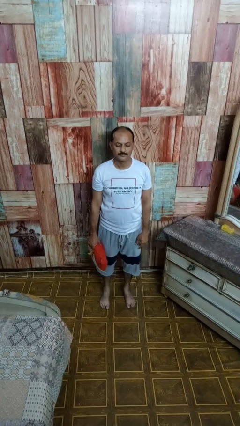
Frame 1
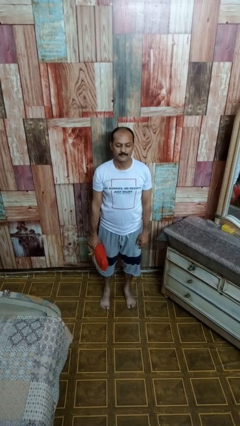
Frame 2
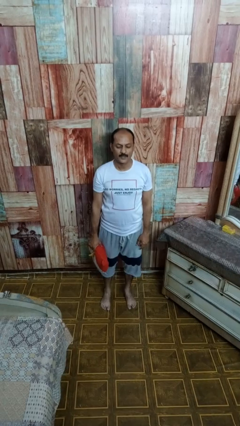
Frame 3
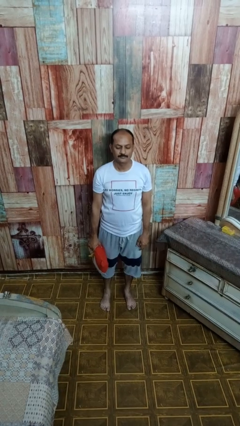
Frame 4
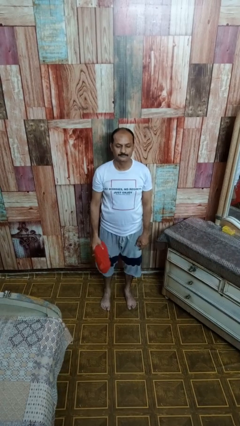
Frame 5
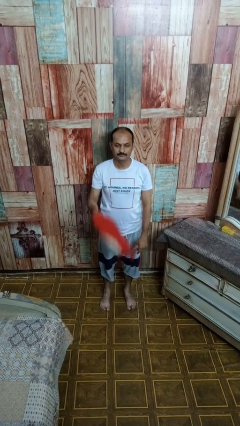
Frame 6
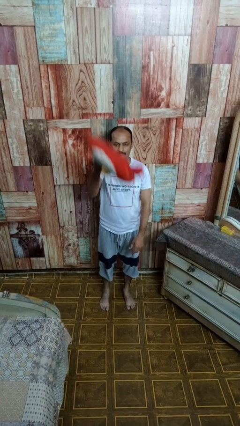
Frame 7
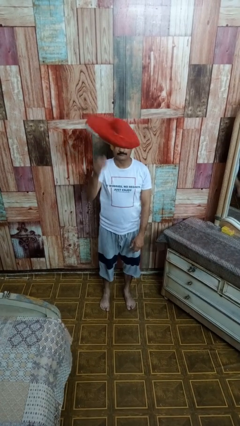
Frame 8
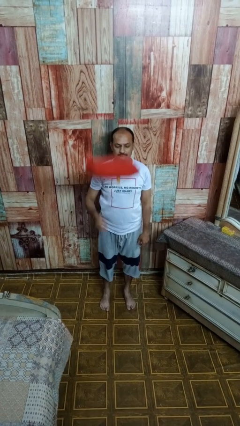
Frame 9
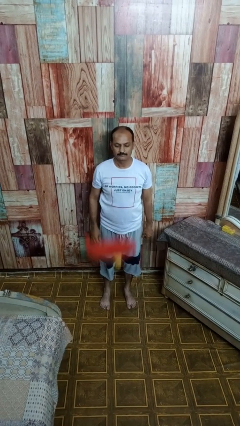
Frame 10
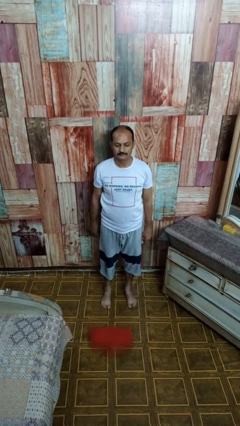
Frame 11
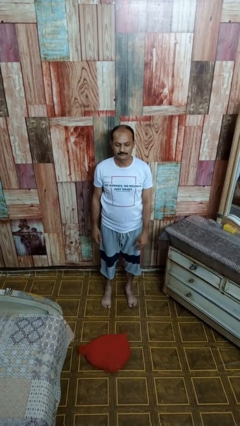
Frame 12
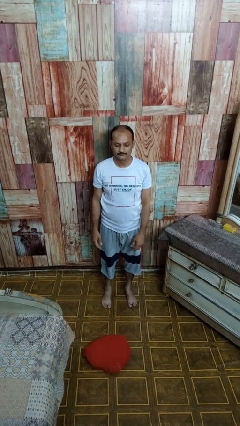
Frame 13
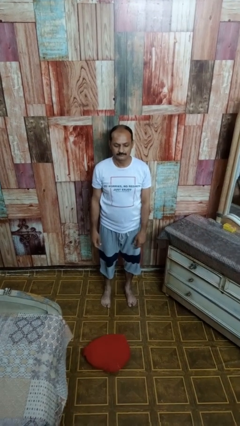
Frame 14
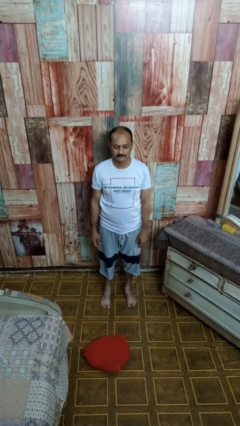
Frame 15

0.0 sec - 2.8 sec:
person throws object into air

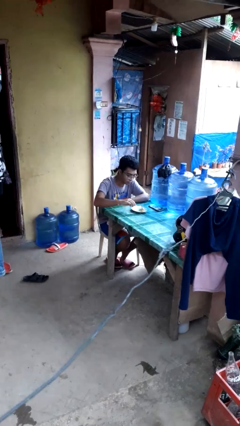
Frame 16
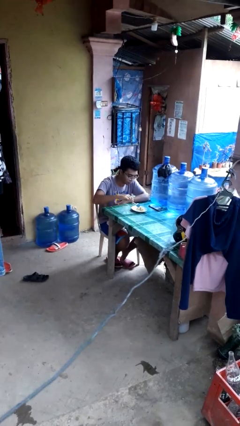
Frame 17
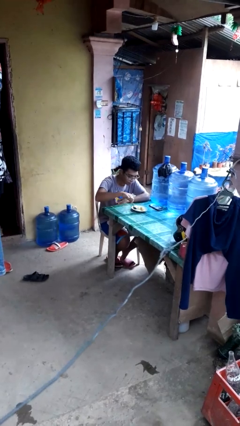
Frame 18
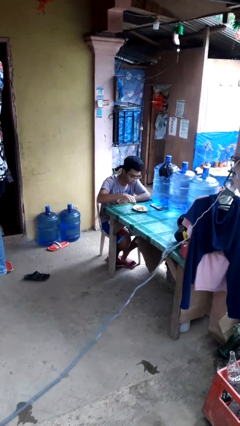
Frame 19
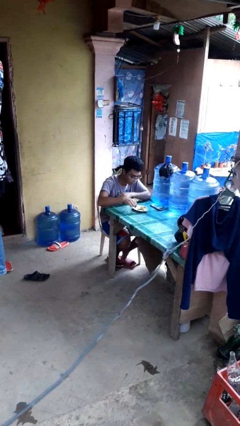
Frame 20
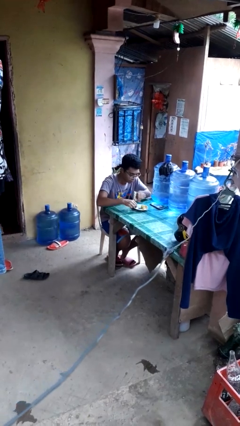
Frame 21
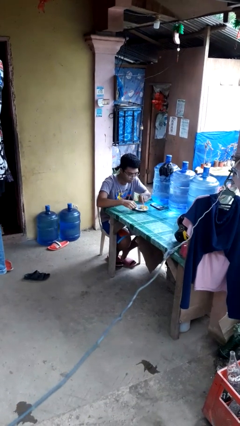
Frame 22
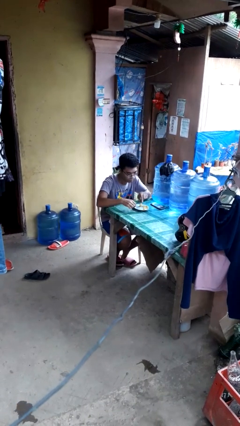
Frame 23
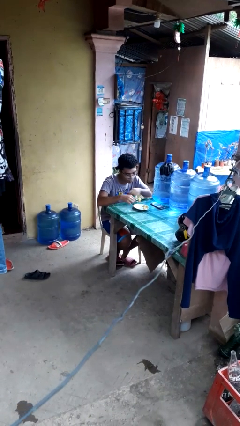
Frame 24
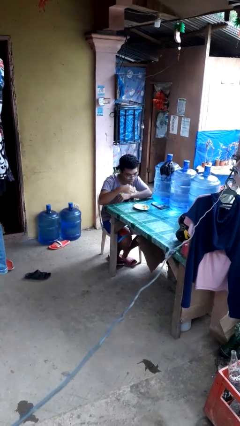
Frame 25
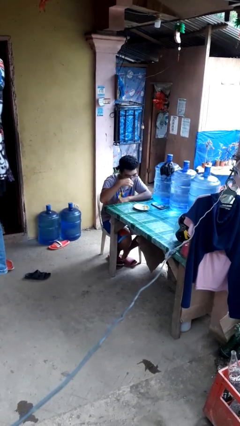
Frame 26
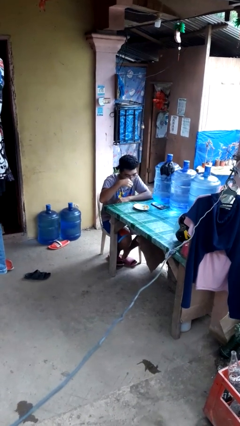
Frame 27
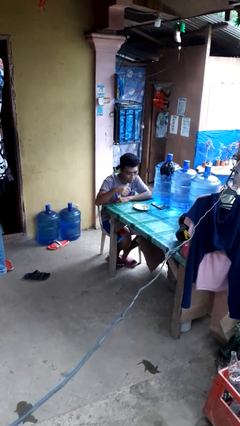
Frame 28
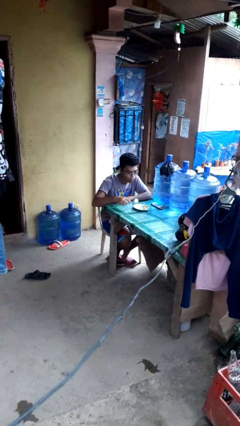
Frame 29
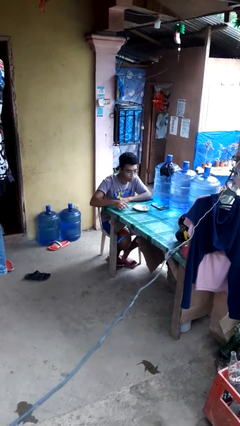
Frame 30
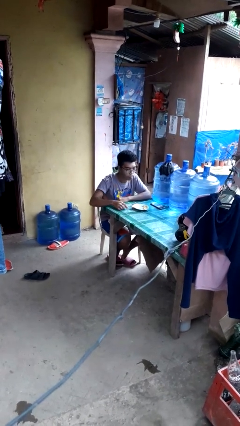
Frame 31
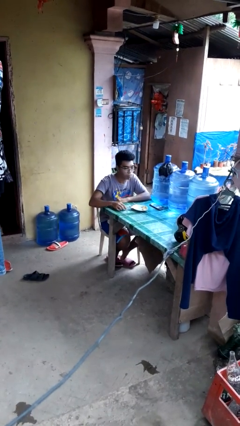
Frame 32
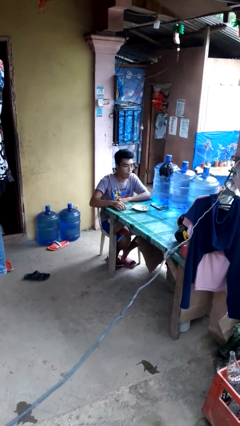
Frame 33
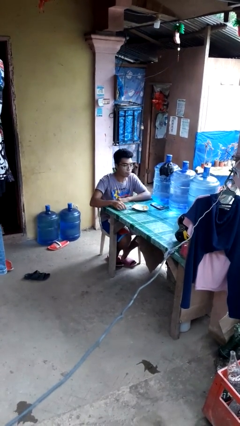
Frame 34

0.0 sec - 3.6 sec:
person eats with utensil

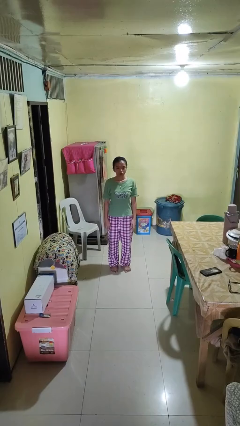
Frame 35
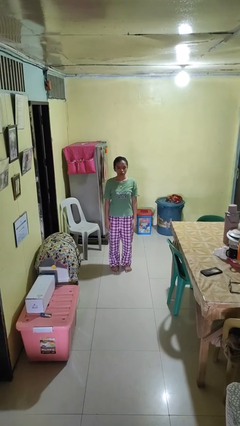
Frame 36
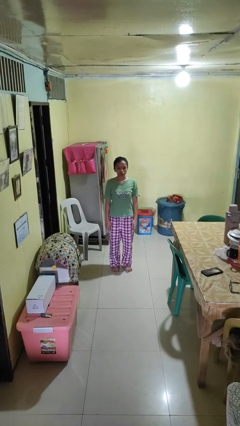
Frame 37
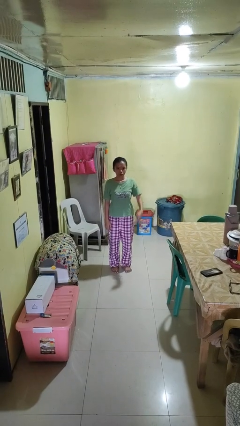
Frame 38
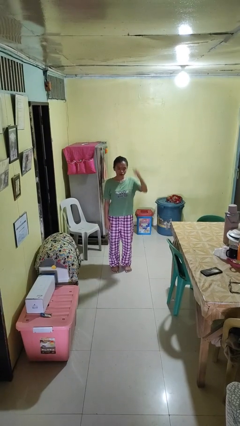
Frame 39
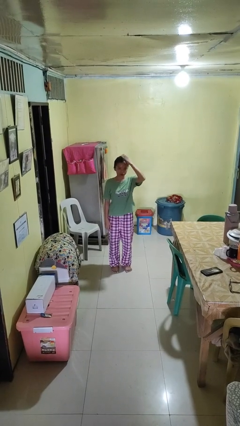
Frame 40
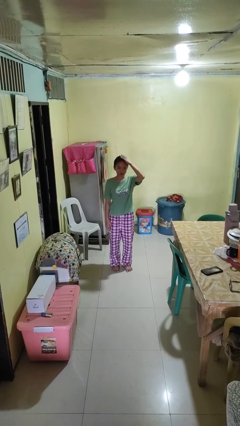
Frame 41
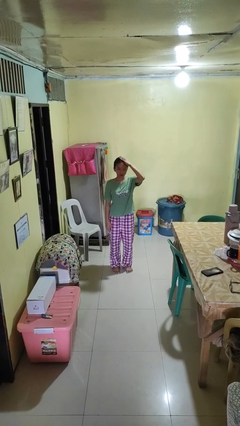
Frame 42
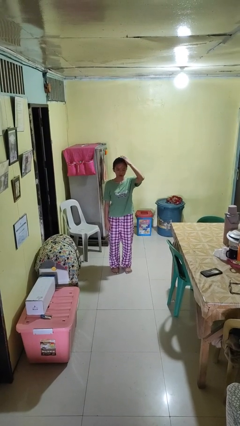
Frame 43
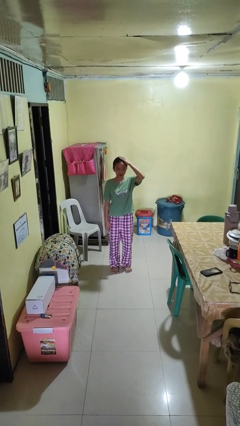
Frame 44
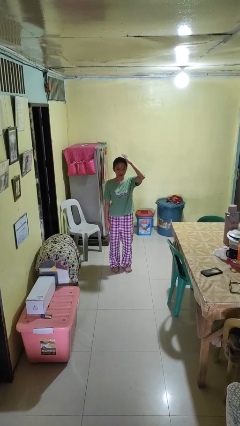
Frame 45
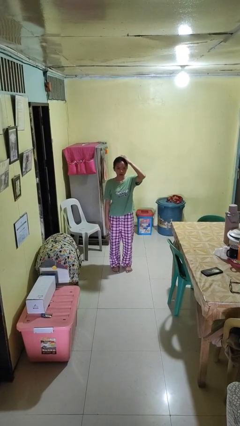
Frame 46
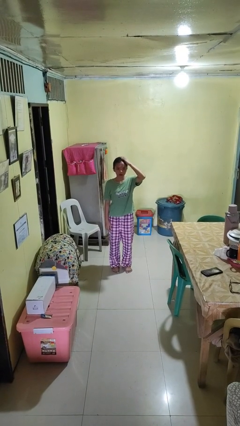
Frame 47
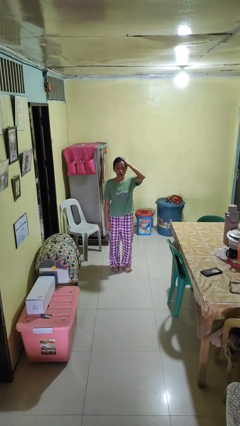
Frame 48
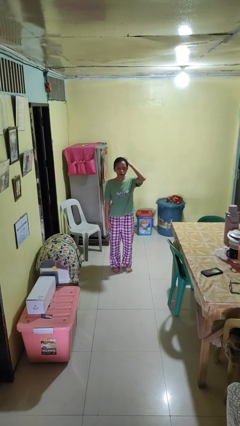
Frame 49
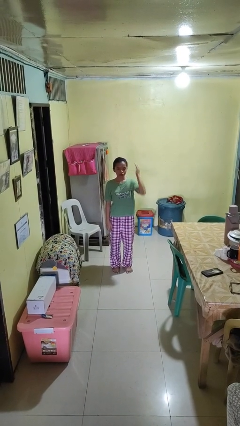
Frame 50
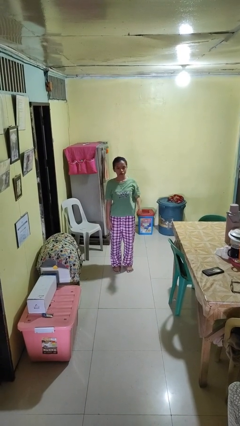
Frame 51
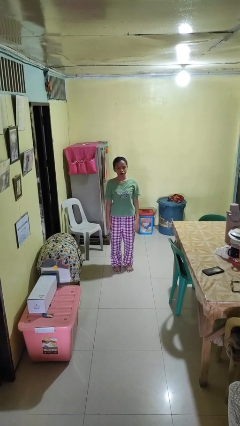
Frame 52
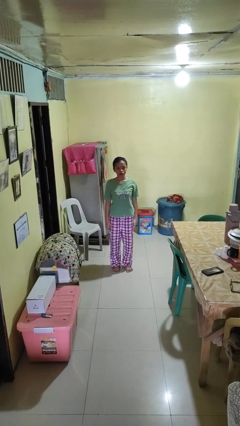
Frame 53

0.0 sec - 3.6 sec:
person pats head

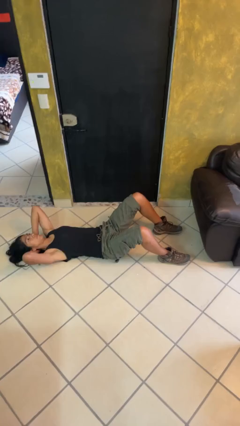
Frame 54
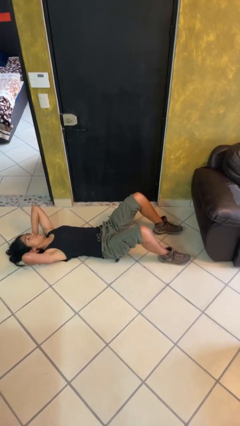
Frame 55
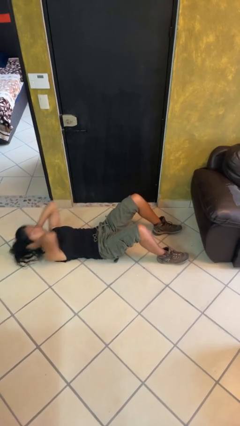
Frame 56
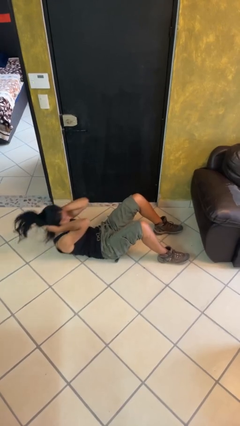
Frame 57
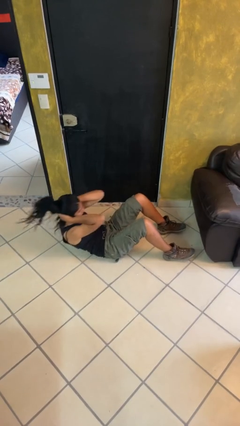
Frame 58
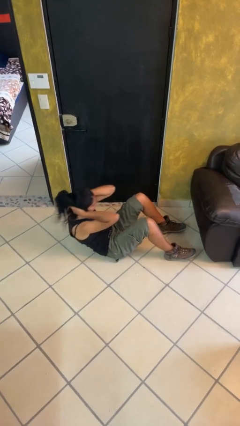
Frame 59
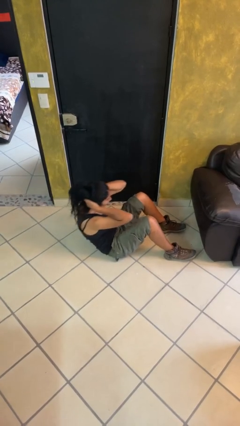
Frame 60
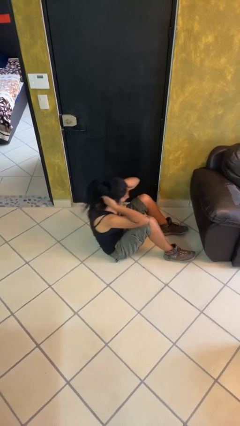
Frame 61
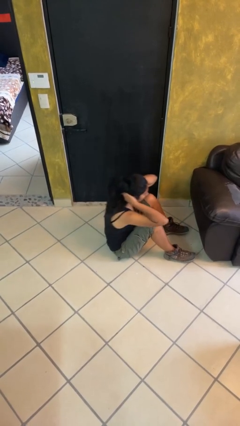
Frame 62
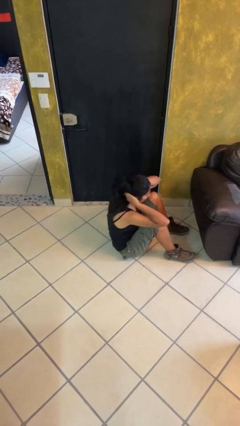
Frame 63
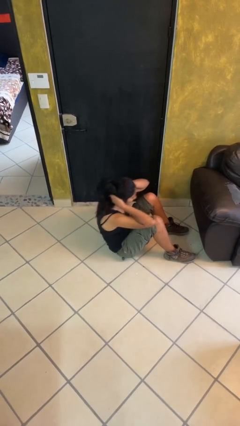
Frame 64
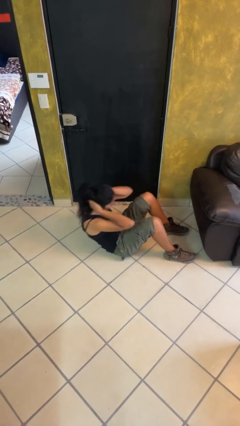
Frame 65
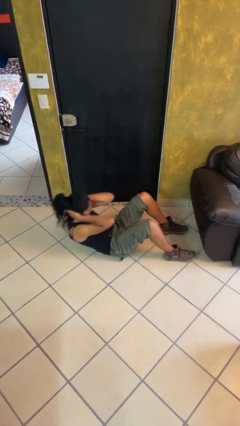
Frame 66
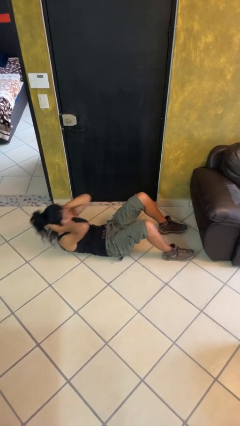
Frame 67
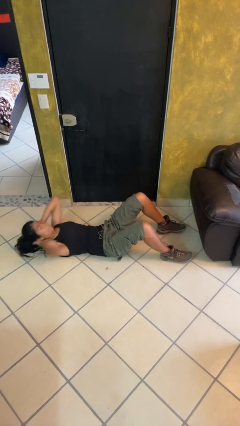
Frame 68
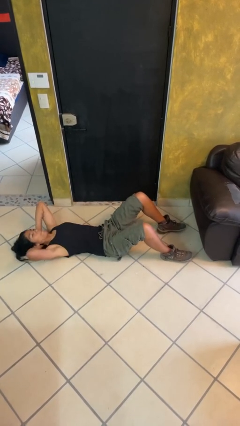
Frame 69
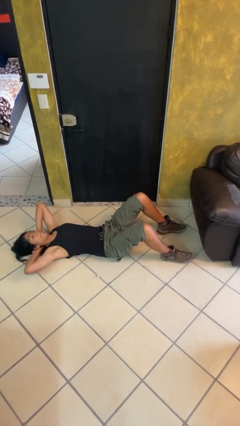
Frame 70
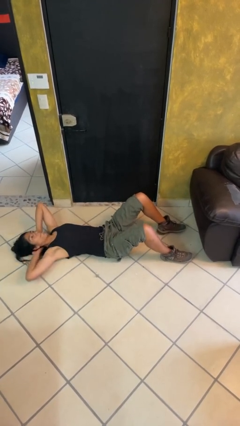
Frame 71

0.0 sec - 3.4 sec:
person exercises with situp

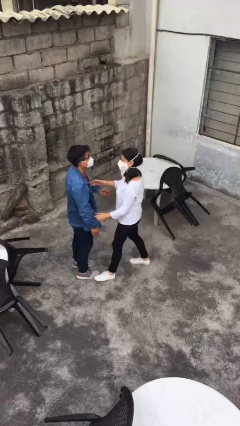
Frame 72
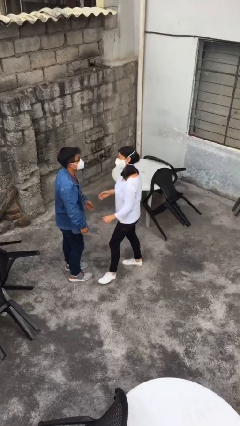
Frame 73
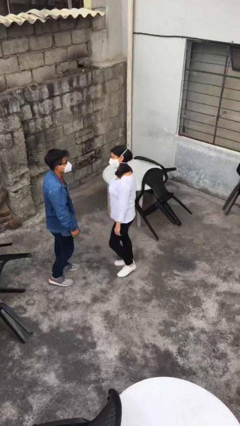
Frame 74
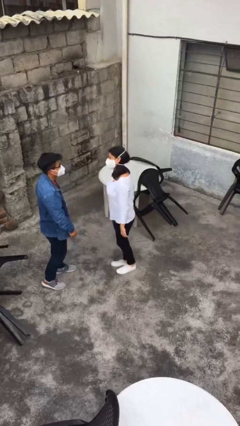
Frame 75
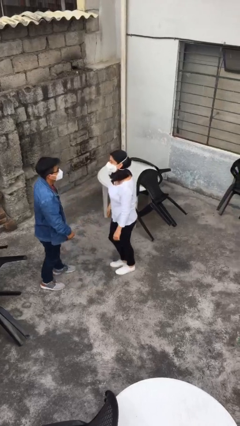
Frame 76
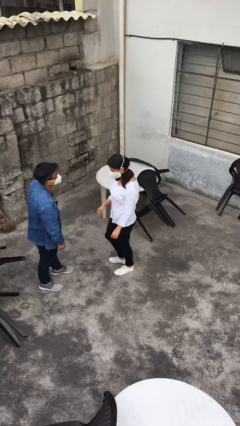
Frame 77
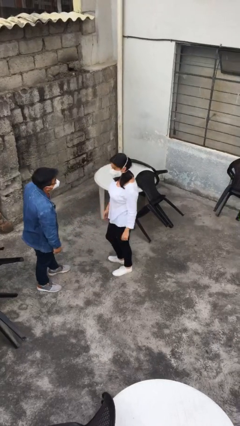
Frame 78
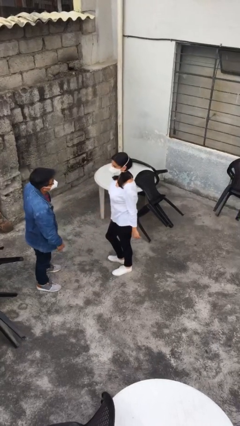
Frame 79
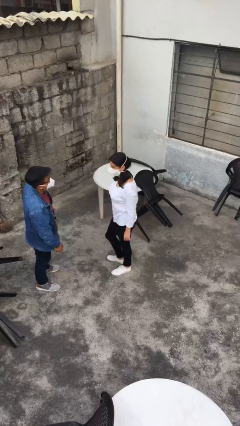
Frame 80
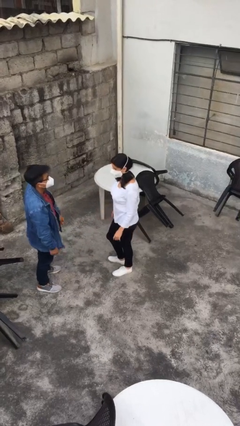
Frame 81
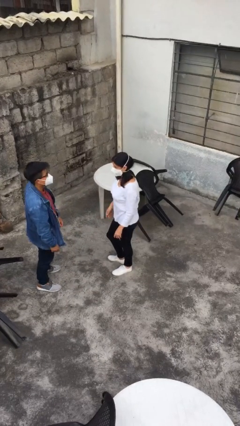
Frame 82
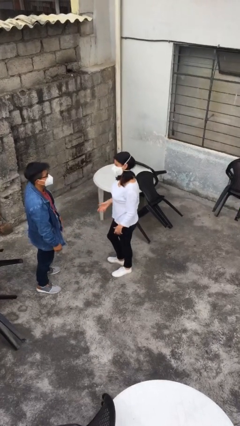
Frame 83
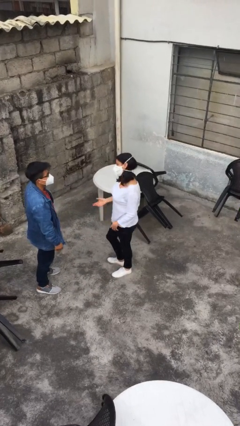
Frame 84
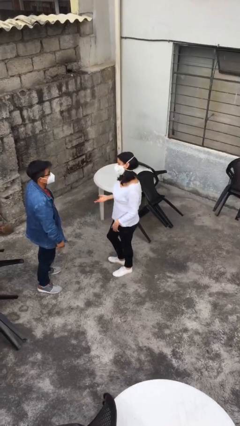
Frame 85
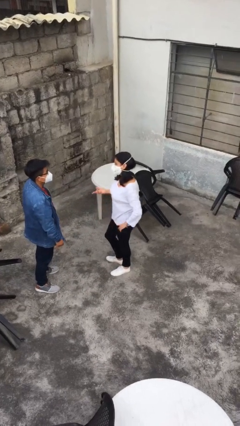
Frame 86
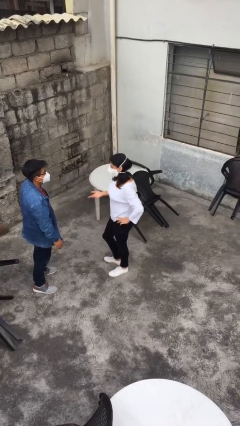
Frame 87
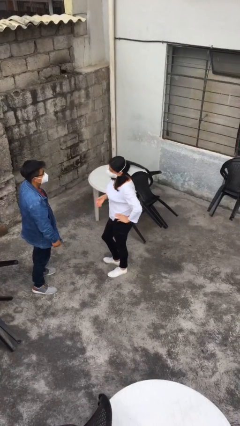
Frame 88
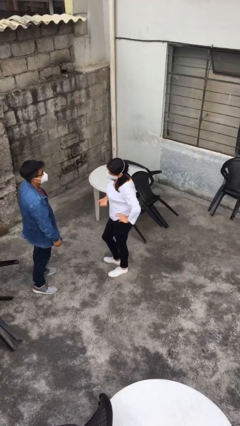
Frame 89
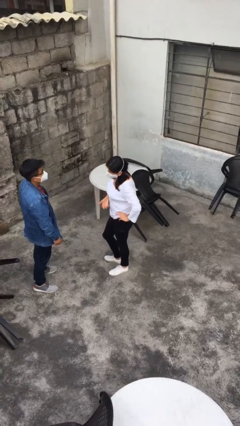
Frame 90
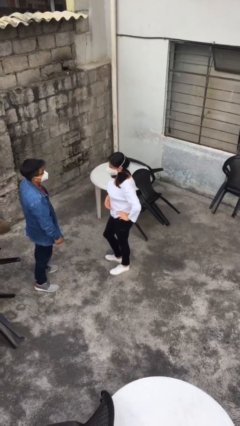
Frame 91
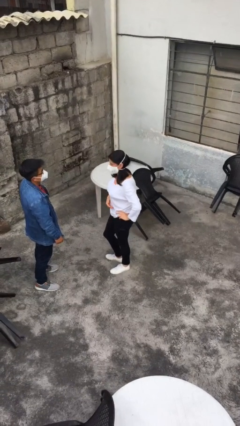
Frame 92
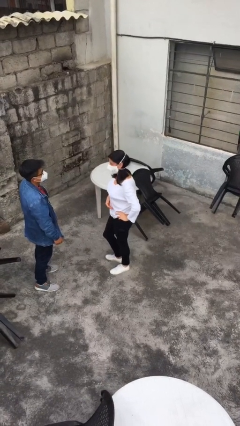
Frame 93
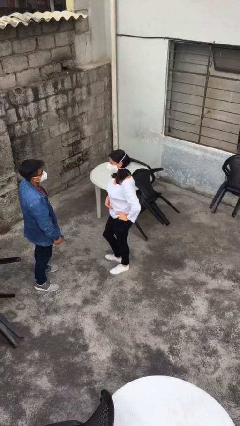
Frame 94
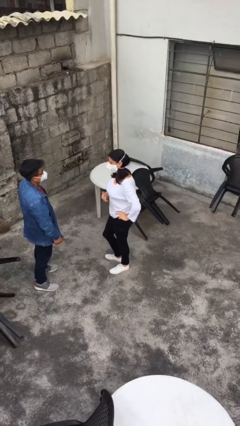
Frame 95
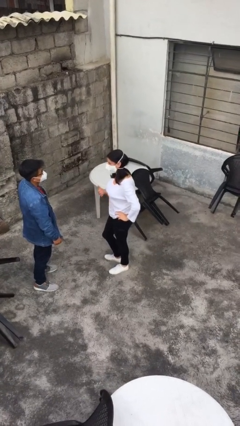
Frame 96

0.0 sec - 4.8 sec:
person talks to person
